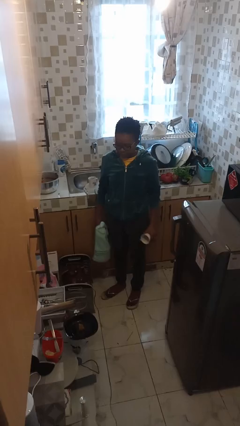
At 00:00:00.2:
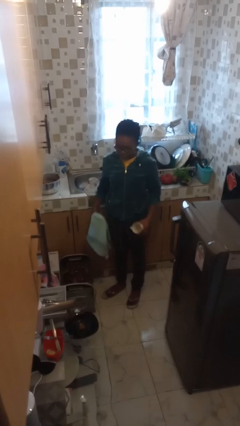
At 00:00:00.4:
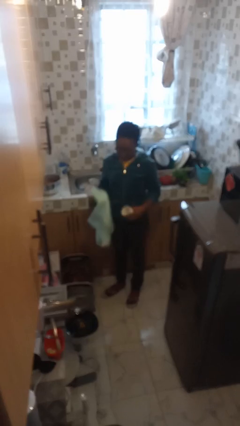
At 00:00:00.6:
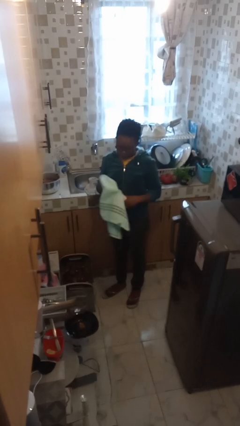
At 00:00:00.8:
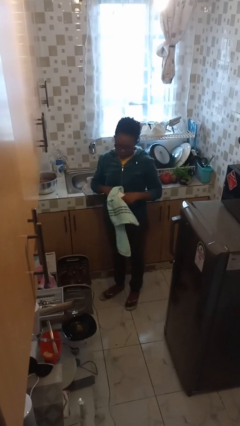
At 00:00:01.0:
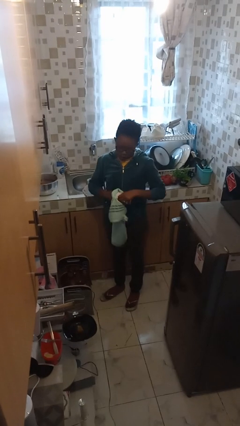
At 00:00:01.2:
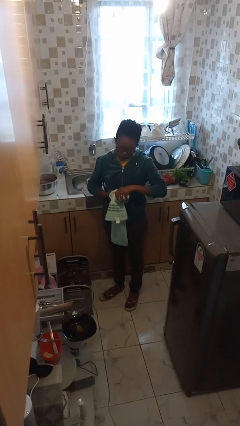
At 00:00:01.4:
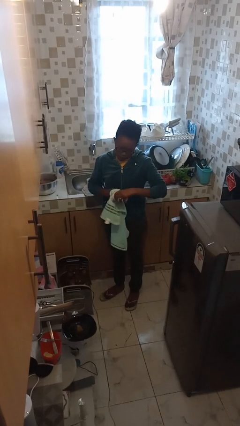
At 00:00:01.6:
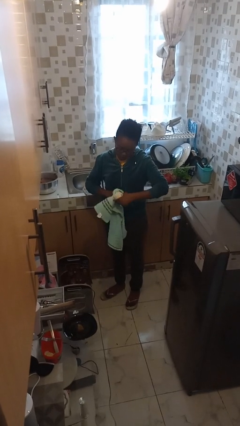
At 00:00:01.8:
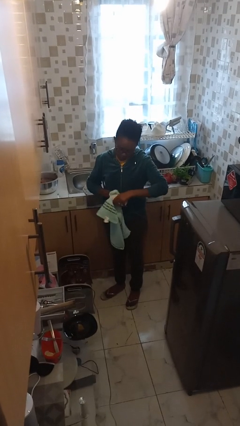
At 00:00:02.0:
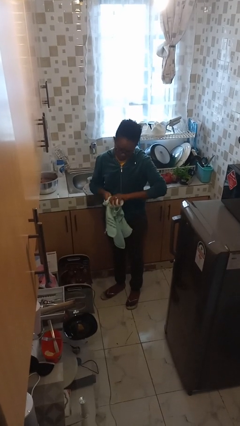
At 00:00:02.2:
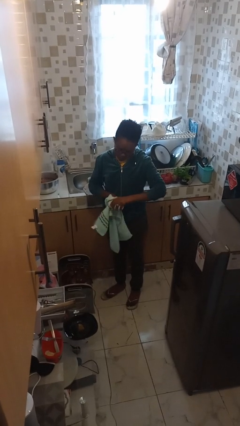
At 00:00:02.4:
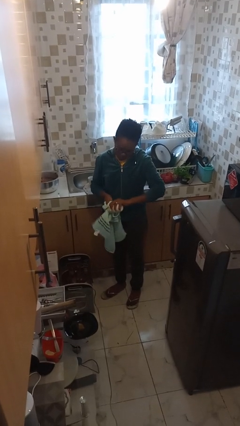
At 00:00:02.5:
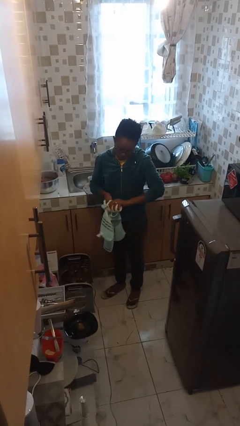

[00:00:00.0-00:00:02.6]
person dries dish

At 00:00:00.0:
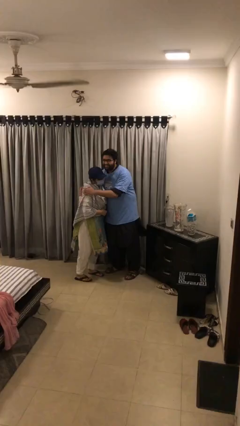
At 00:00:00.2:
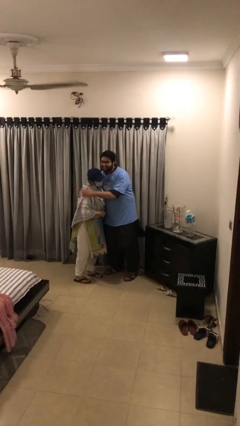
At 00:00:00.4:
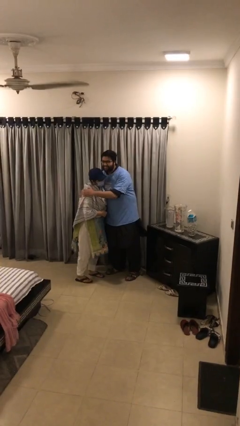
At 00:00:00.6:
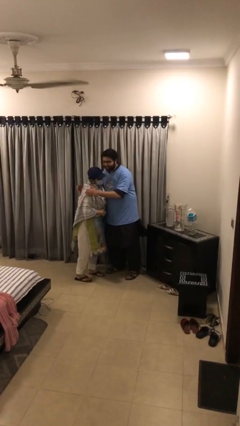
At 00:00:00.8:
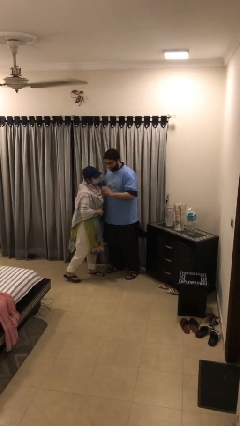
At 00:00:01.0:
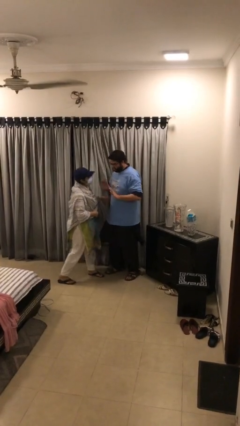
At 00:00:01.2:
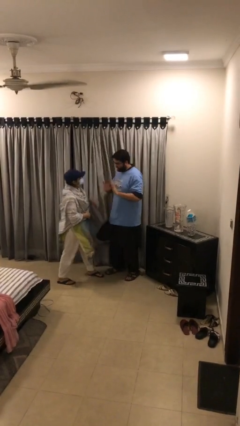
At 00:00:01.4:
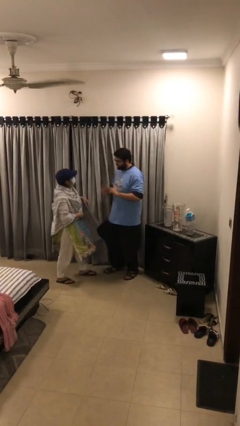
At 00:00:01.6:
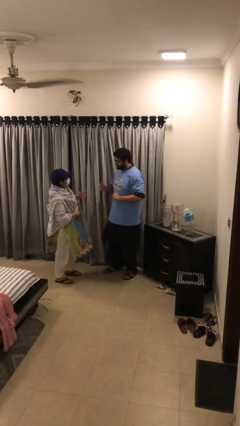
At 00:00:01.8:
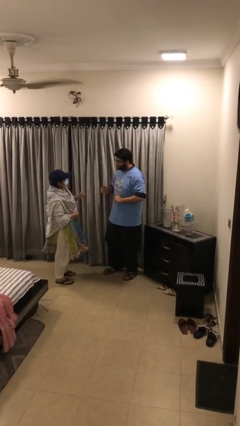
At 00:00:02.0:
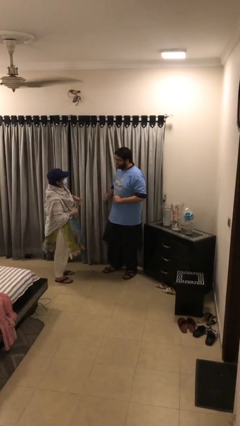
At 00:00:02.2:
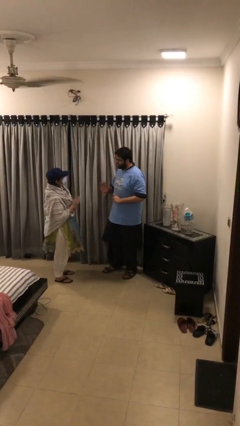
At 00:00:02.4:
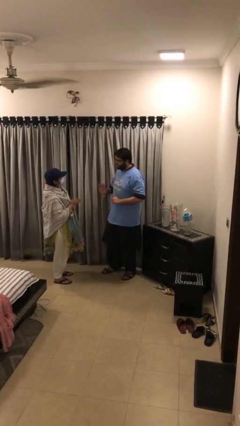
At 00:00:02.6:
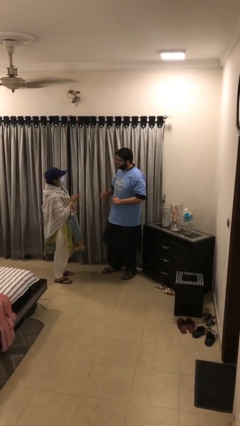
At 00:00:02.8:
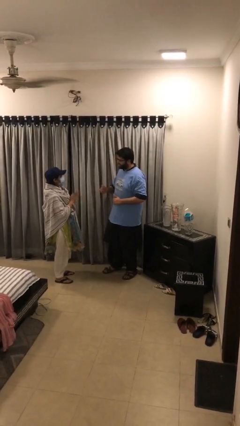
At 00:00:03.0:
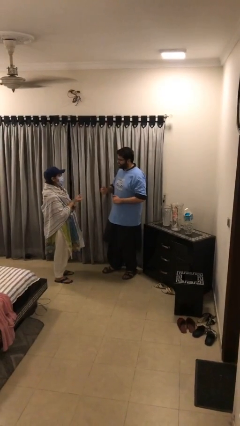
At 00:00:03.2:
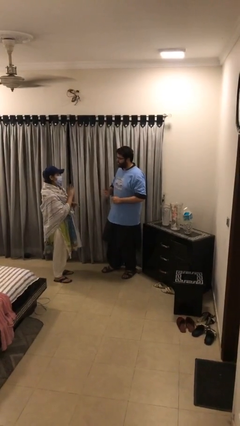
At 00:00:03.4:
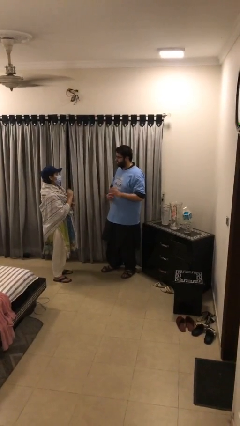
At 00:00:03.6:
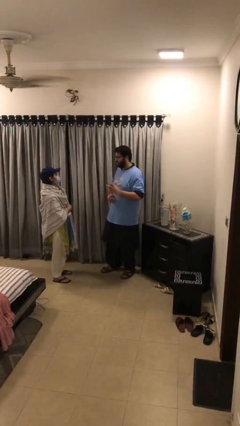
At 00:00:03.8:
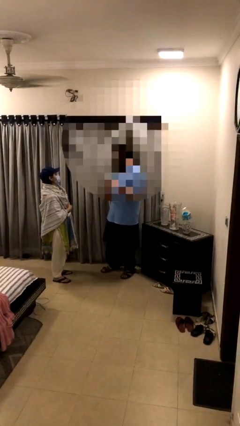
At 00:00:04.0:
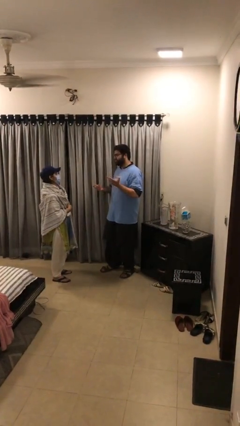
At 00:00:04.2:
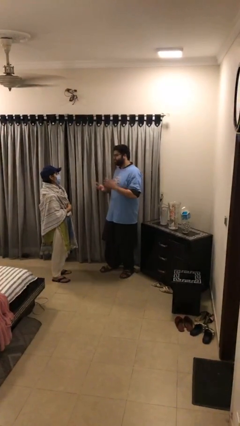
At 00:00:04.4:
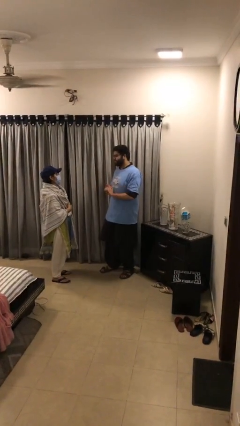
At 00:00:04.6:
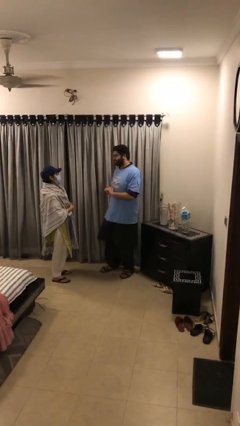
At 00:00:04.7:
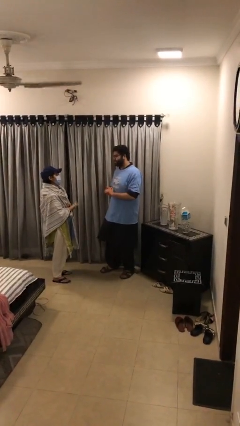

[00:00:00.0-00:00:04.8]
person talks to person

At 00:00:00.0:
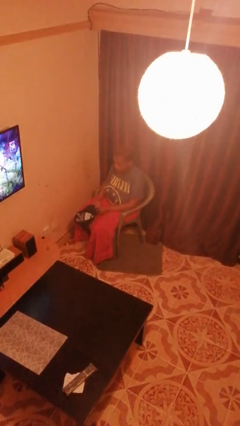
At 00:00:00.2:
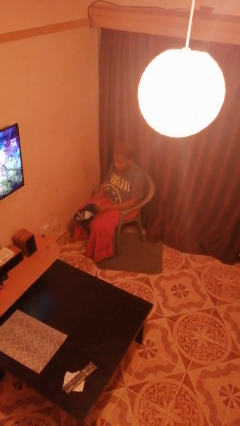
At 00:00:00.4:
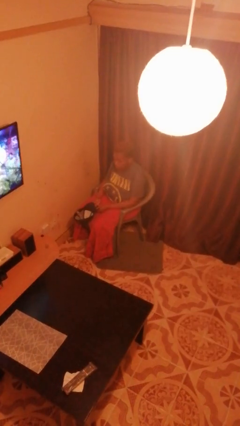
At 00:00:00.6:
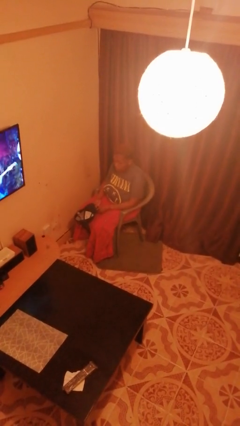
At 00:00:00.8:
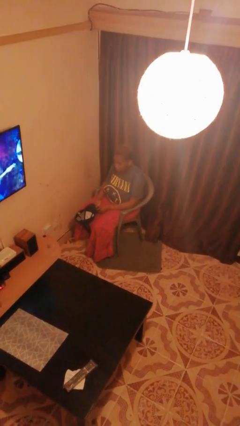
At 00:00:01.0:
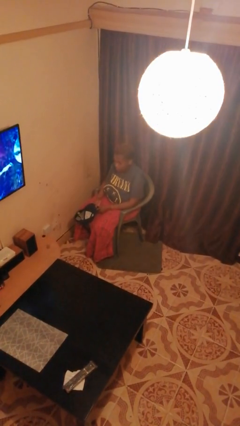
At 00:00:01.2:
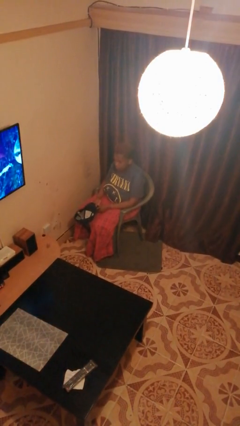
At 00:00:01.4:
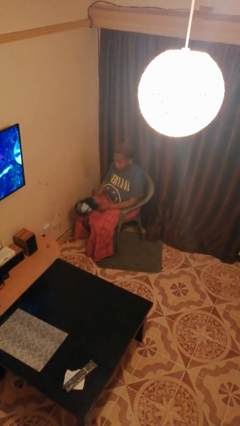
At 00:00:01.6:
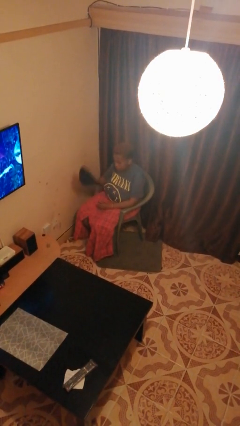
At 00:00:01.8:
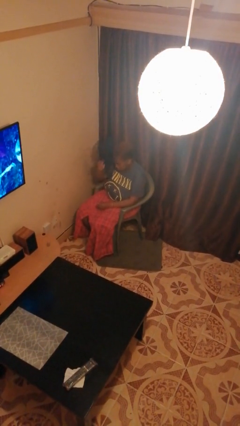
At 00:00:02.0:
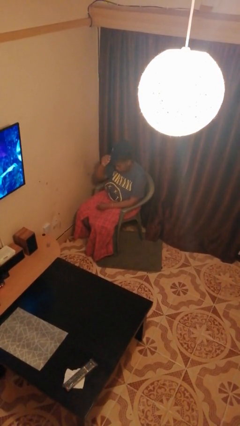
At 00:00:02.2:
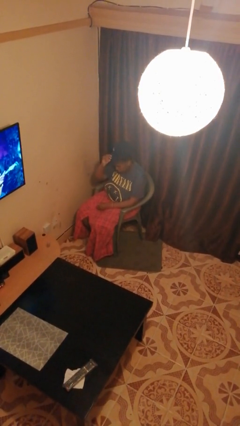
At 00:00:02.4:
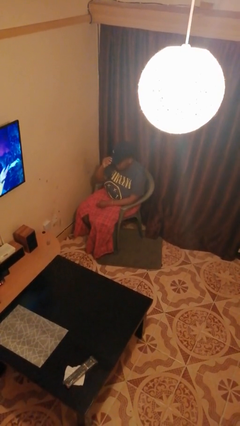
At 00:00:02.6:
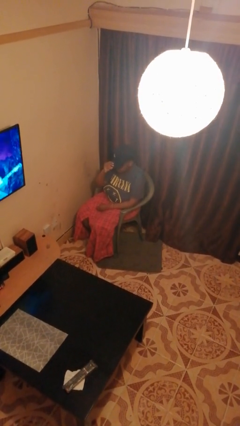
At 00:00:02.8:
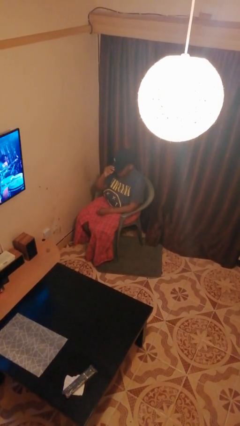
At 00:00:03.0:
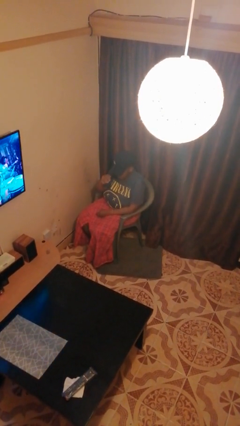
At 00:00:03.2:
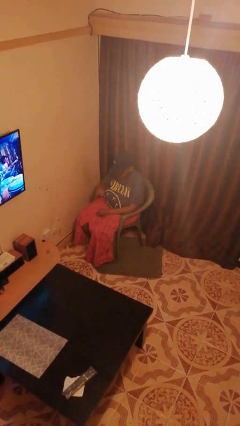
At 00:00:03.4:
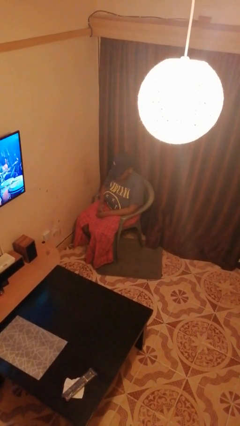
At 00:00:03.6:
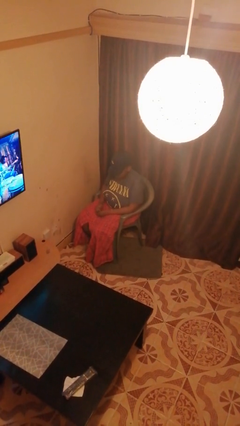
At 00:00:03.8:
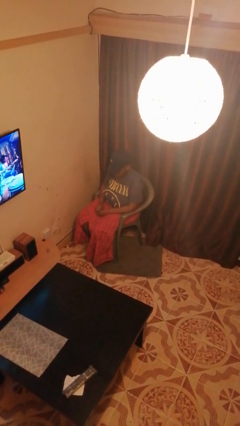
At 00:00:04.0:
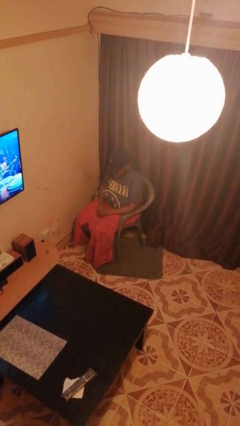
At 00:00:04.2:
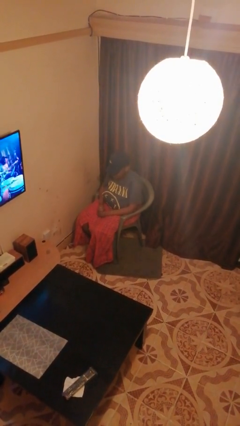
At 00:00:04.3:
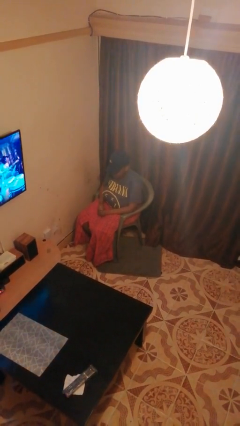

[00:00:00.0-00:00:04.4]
person puts on hat

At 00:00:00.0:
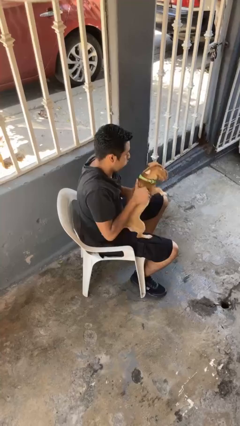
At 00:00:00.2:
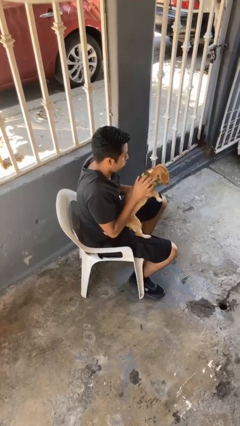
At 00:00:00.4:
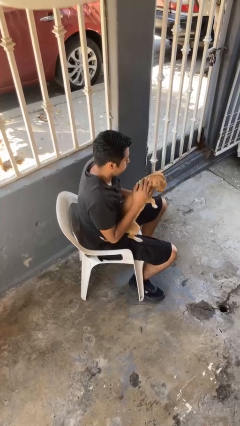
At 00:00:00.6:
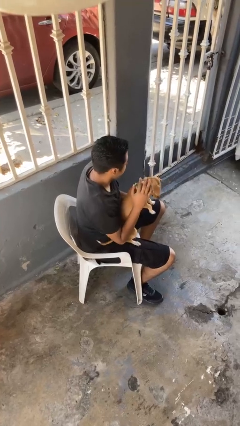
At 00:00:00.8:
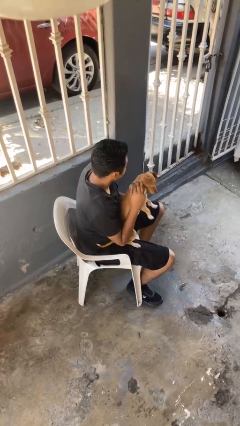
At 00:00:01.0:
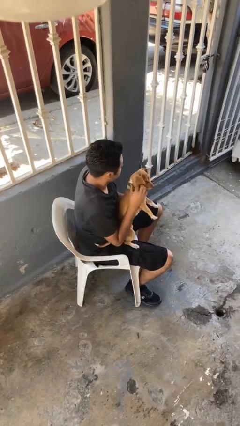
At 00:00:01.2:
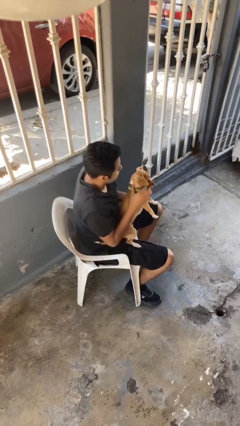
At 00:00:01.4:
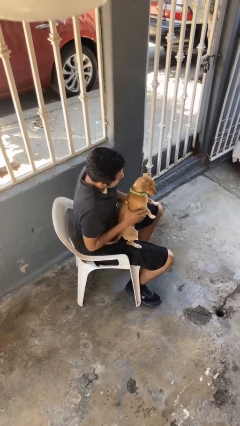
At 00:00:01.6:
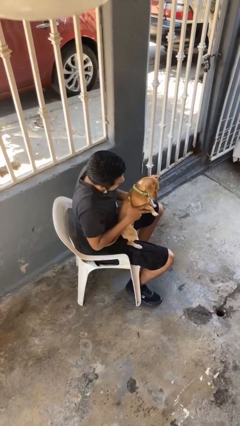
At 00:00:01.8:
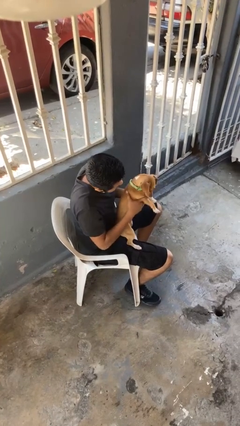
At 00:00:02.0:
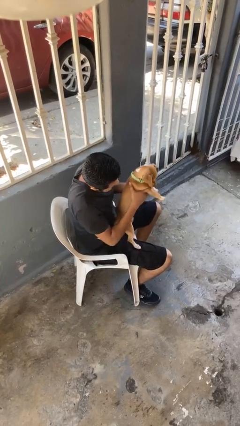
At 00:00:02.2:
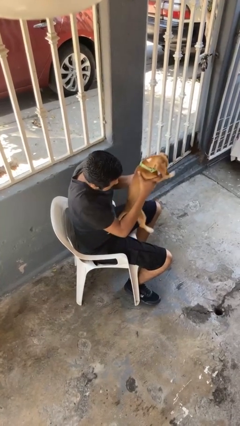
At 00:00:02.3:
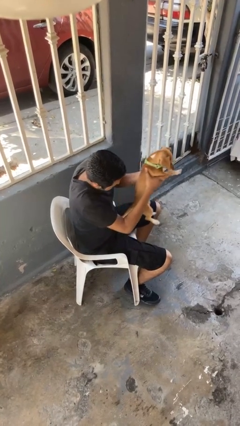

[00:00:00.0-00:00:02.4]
person hugs dog

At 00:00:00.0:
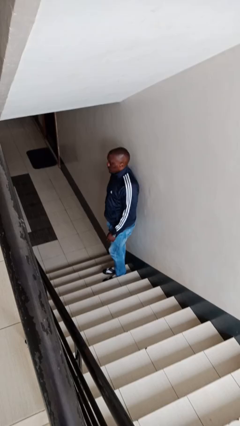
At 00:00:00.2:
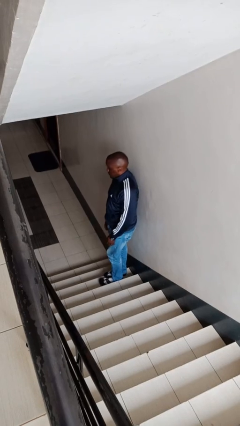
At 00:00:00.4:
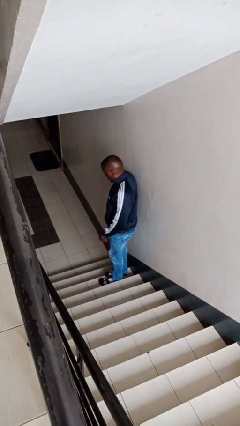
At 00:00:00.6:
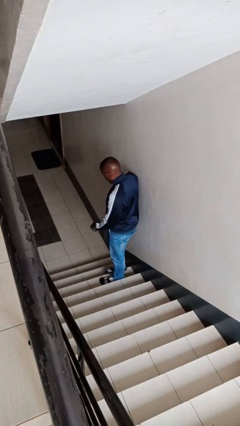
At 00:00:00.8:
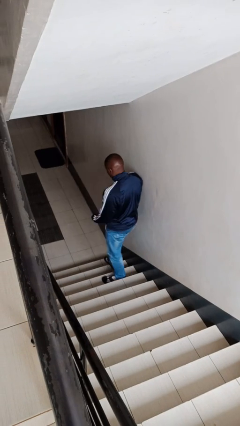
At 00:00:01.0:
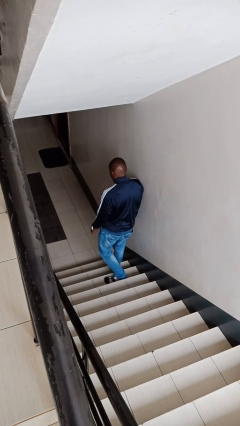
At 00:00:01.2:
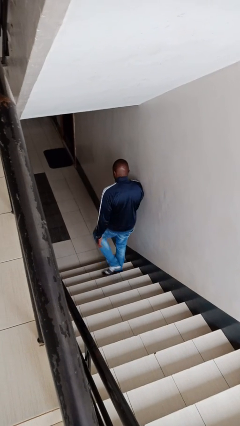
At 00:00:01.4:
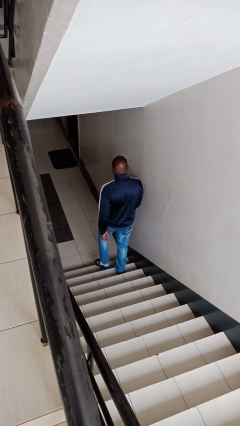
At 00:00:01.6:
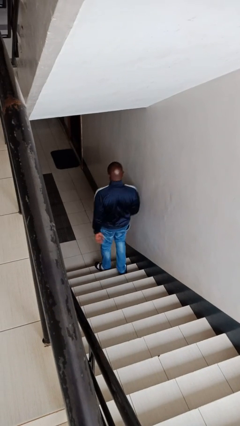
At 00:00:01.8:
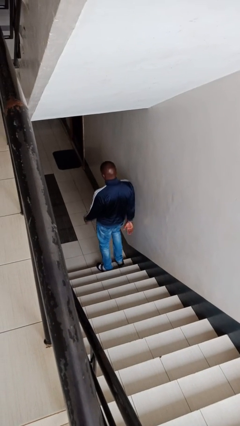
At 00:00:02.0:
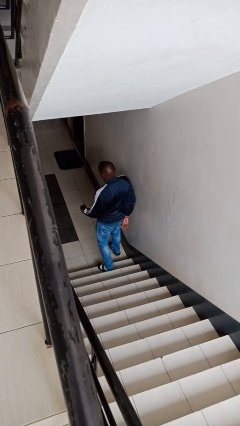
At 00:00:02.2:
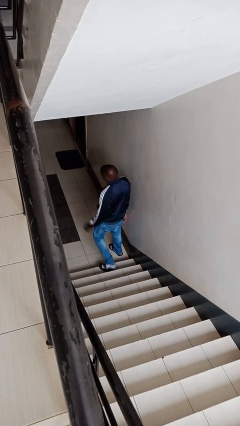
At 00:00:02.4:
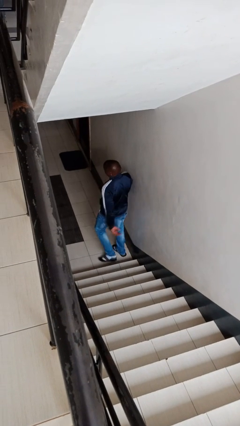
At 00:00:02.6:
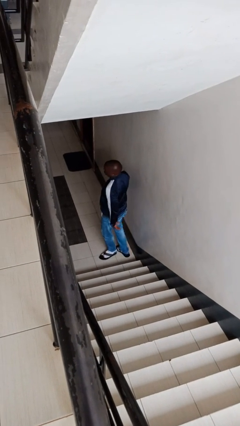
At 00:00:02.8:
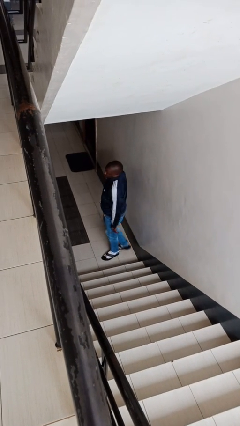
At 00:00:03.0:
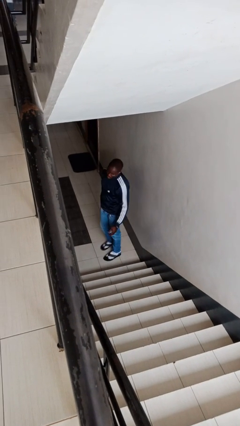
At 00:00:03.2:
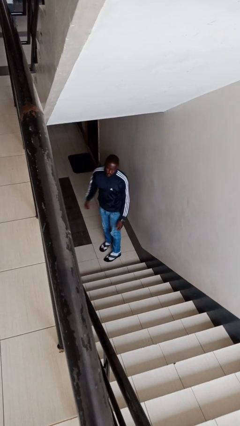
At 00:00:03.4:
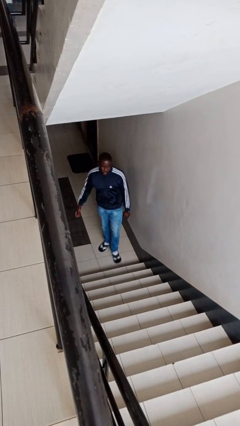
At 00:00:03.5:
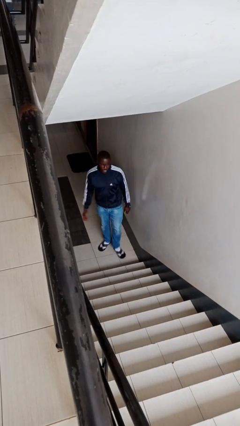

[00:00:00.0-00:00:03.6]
person climbs down stairs
